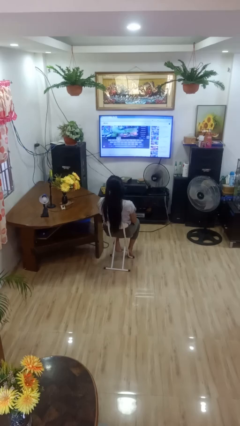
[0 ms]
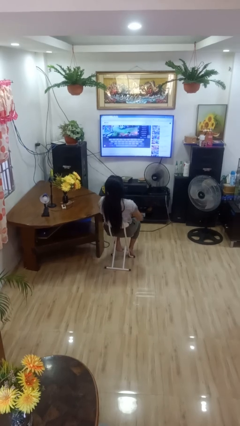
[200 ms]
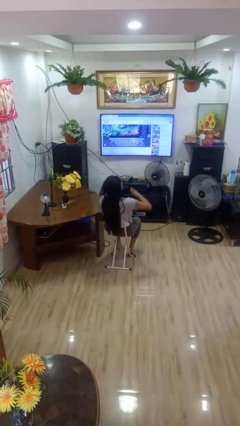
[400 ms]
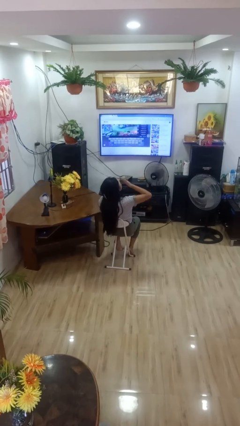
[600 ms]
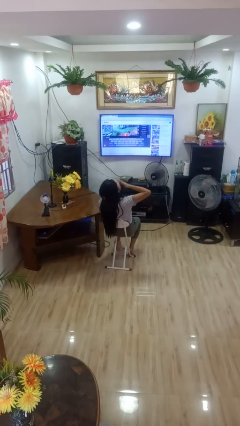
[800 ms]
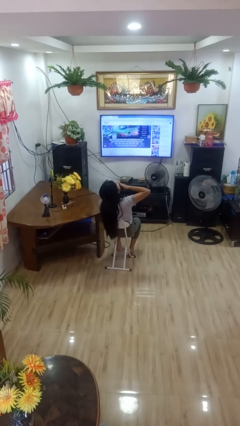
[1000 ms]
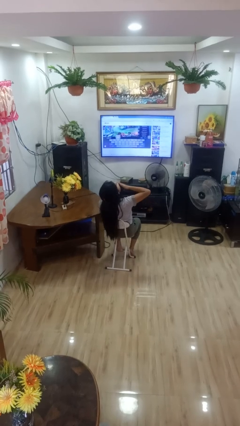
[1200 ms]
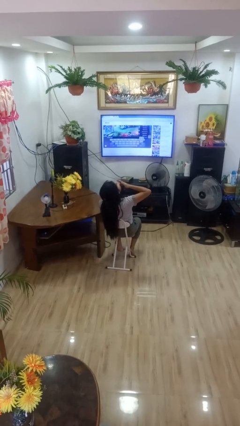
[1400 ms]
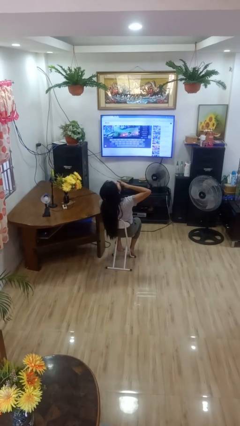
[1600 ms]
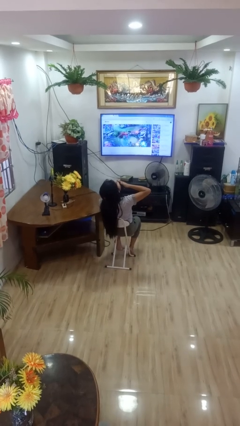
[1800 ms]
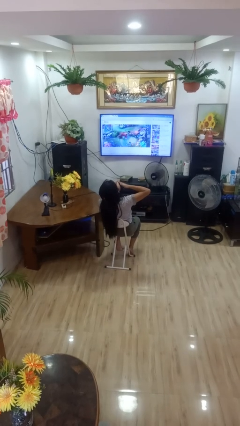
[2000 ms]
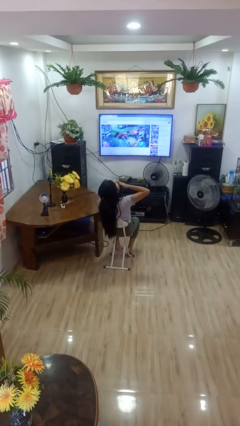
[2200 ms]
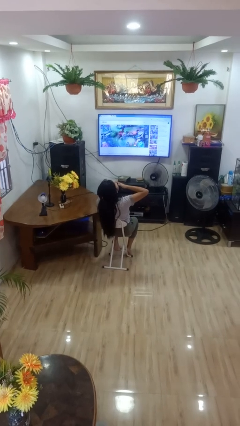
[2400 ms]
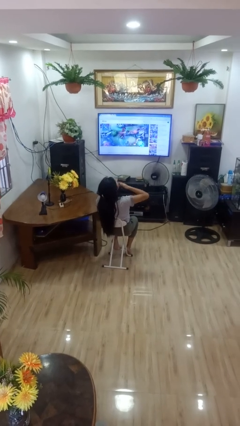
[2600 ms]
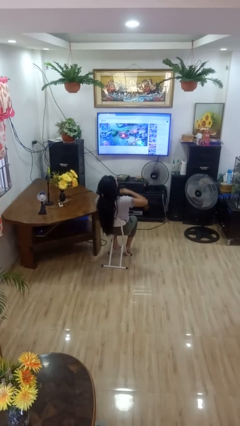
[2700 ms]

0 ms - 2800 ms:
person yawns

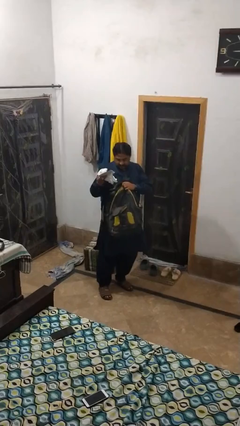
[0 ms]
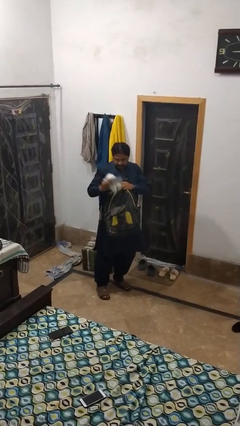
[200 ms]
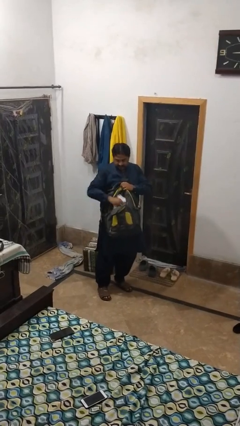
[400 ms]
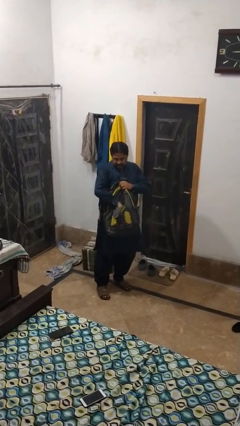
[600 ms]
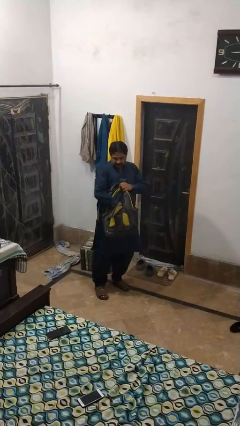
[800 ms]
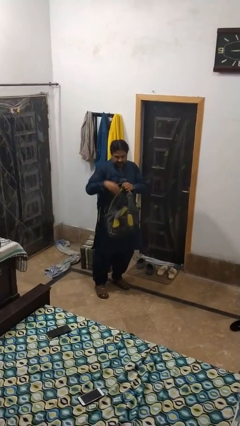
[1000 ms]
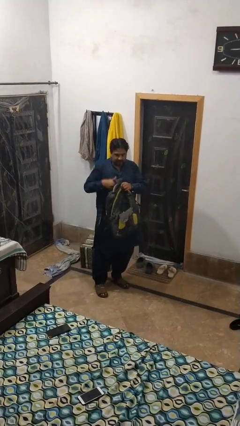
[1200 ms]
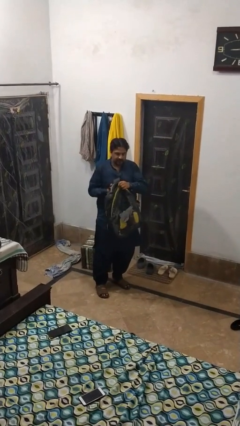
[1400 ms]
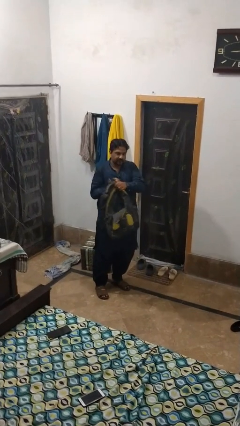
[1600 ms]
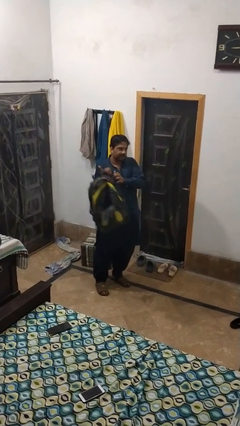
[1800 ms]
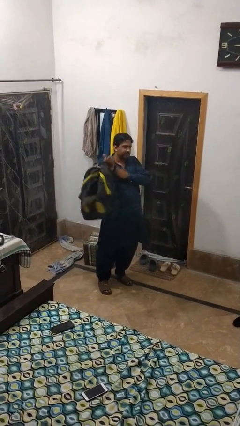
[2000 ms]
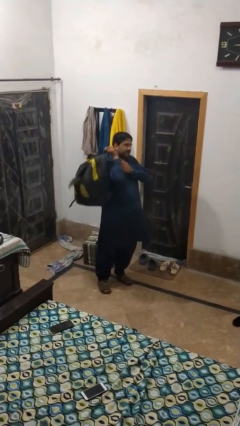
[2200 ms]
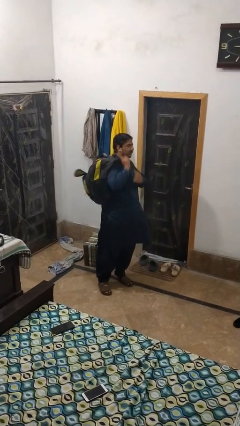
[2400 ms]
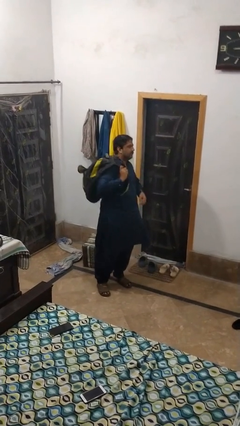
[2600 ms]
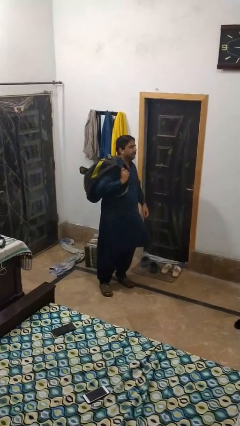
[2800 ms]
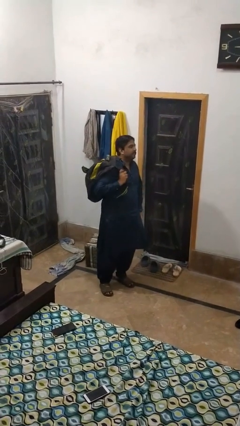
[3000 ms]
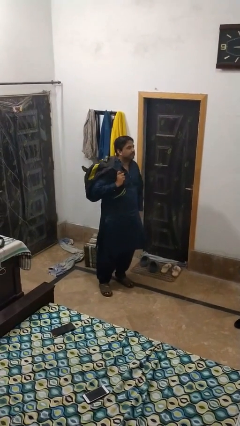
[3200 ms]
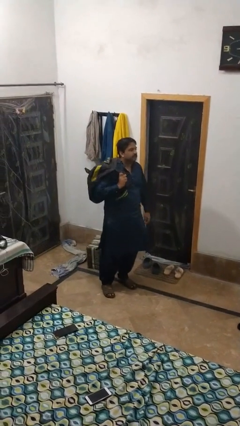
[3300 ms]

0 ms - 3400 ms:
person puts object into backpack

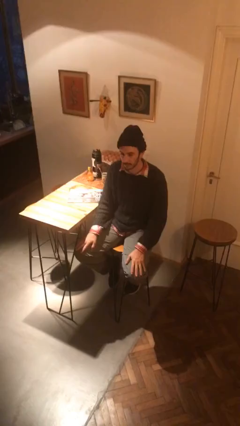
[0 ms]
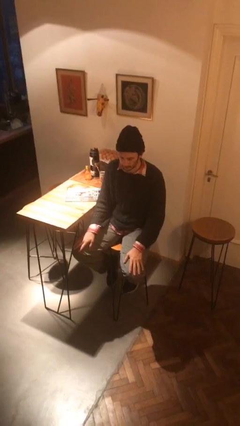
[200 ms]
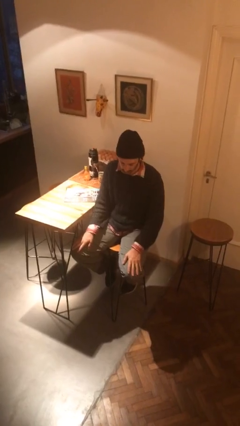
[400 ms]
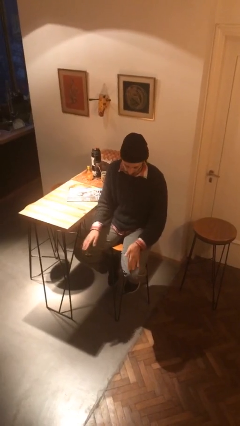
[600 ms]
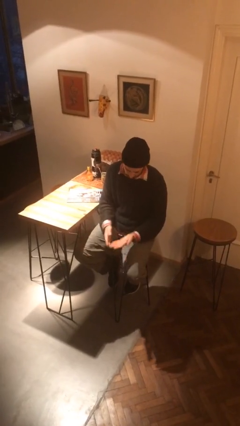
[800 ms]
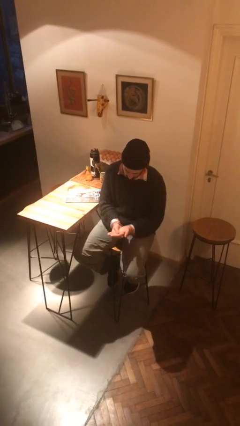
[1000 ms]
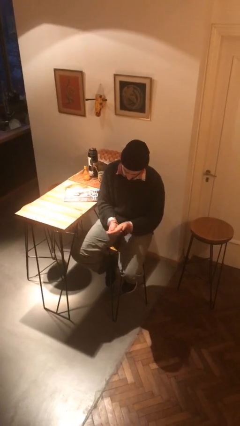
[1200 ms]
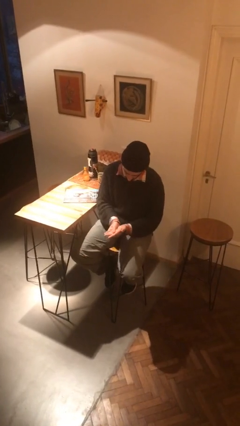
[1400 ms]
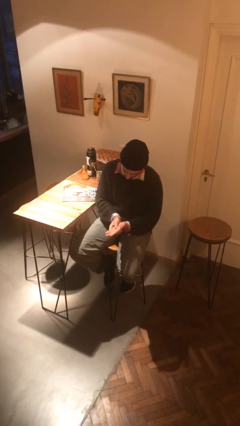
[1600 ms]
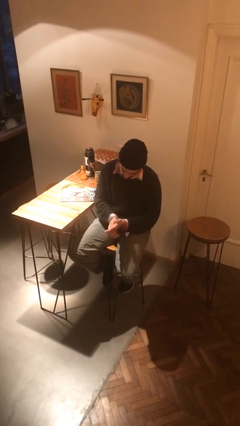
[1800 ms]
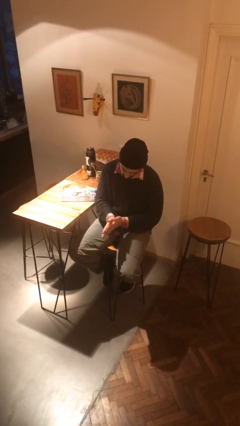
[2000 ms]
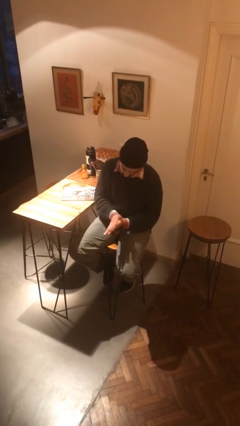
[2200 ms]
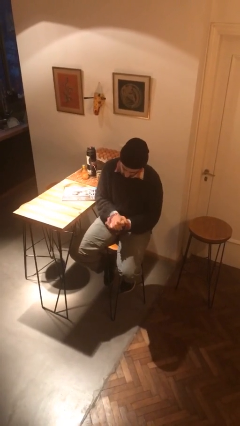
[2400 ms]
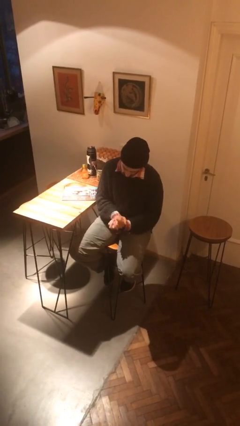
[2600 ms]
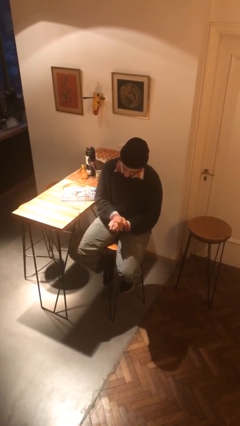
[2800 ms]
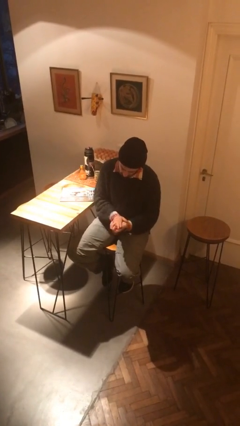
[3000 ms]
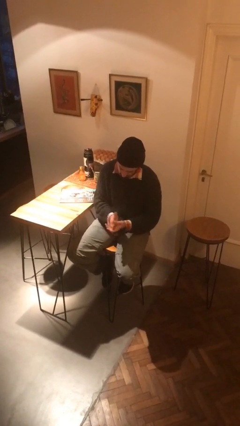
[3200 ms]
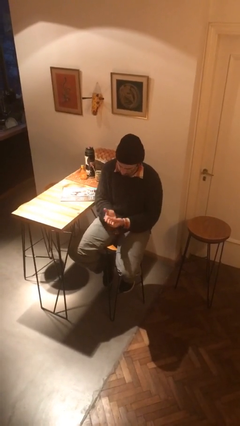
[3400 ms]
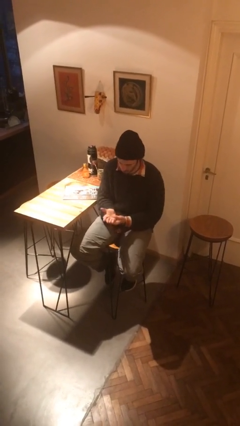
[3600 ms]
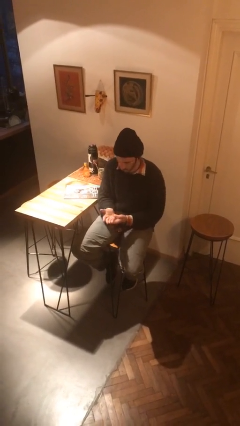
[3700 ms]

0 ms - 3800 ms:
person looks at hands in lap

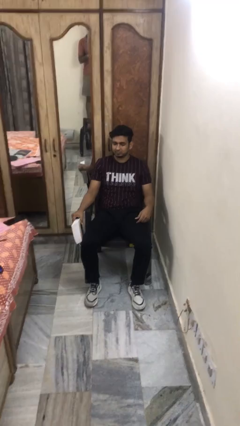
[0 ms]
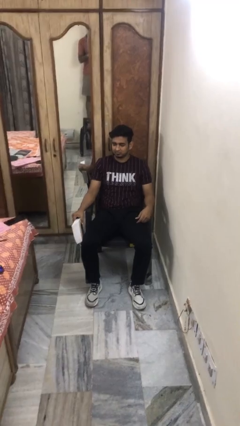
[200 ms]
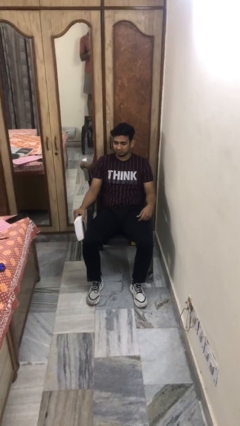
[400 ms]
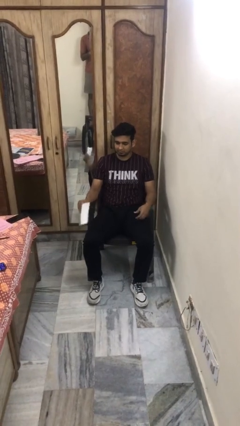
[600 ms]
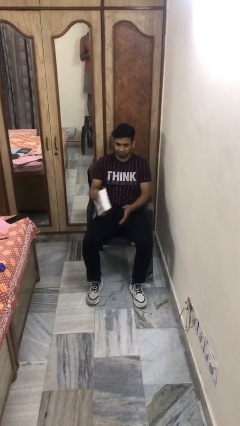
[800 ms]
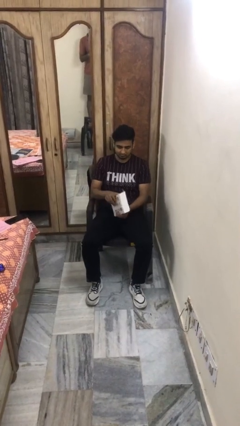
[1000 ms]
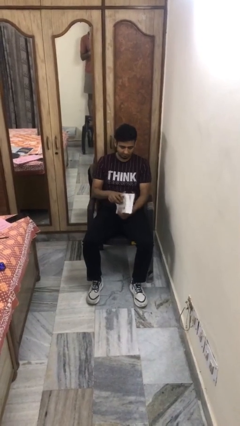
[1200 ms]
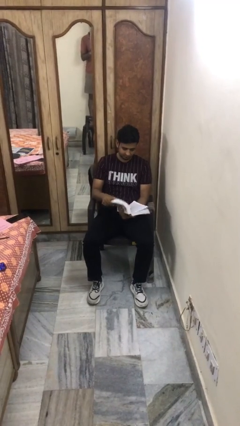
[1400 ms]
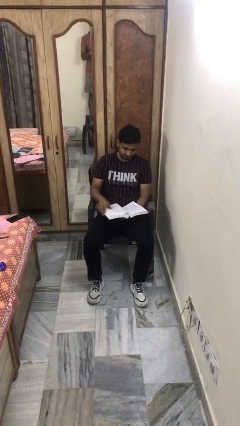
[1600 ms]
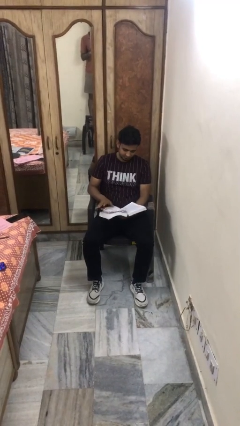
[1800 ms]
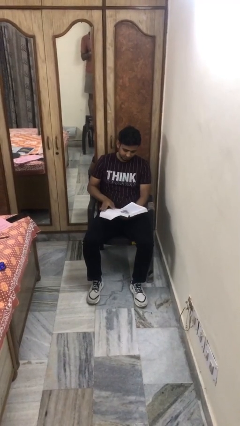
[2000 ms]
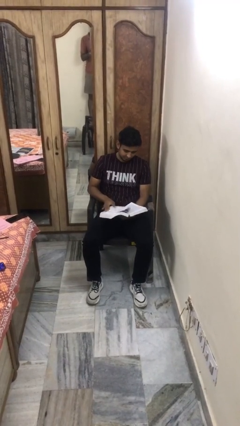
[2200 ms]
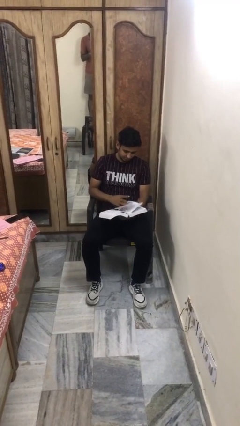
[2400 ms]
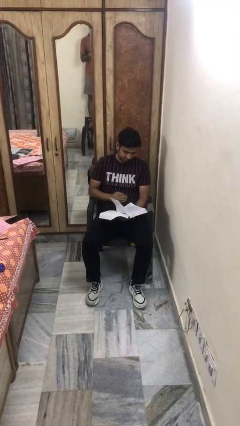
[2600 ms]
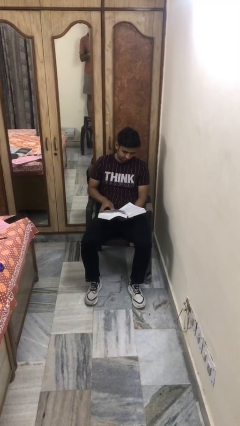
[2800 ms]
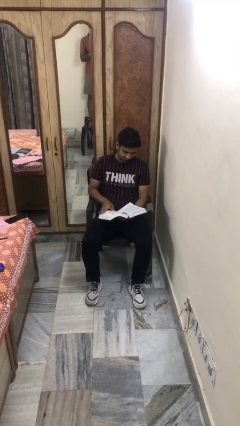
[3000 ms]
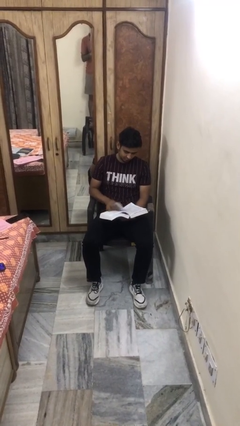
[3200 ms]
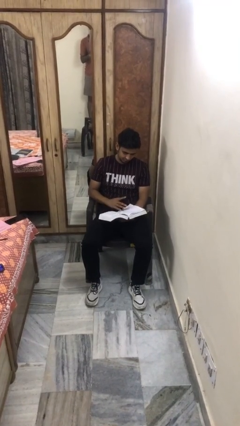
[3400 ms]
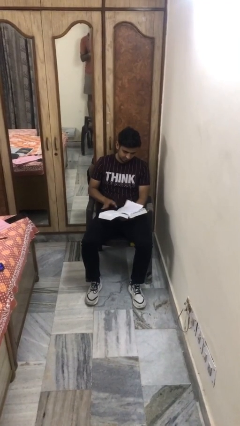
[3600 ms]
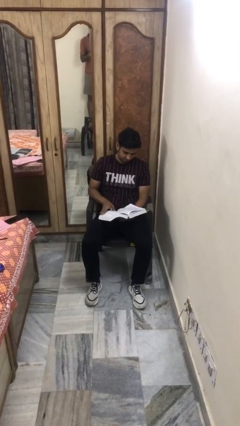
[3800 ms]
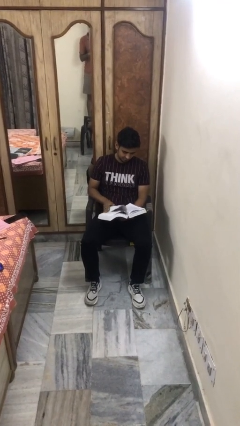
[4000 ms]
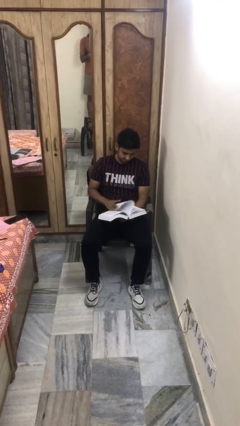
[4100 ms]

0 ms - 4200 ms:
person reads book

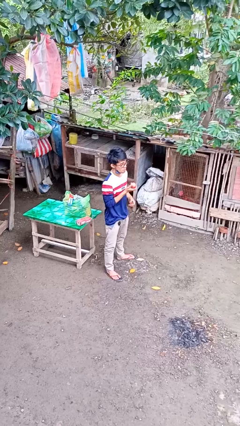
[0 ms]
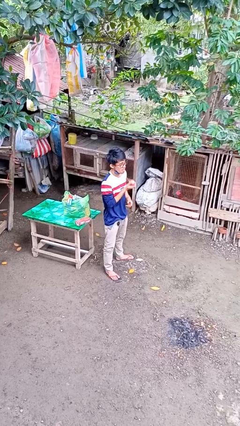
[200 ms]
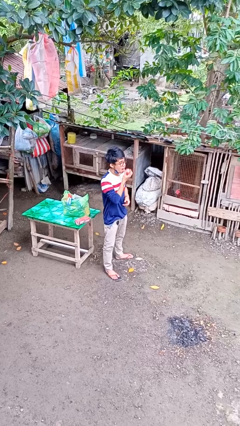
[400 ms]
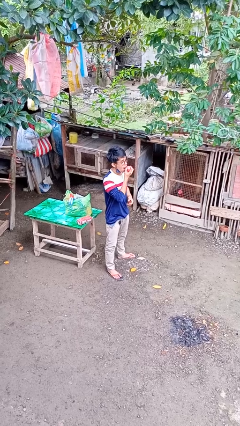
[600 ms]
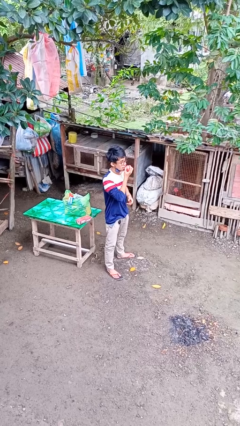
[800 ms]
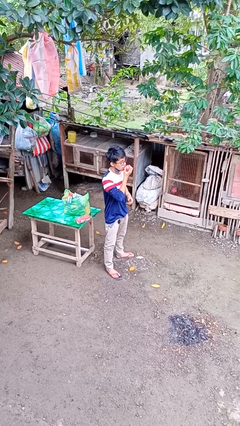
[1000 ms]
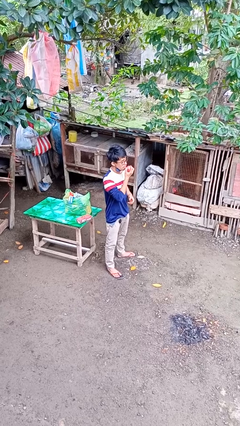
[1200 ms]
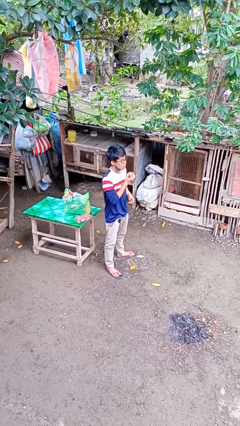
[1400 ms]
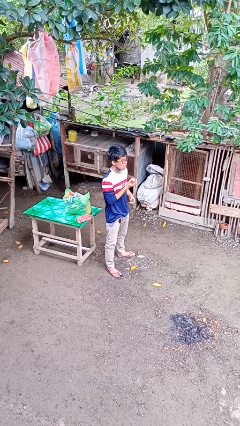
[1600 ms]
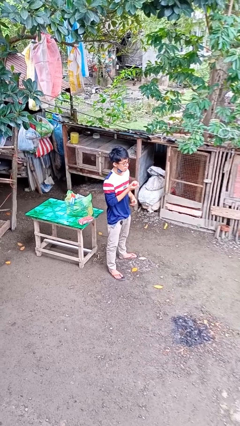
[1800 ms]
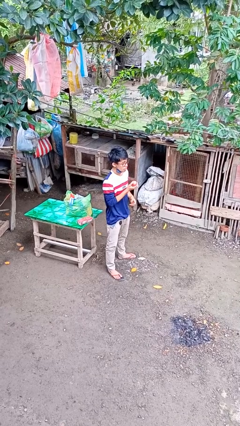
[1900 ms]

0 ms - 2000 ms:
person eats apple

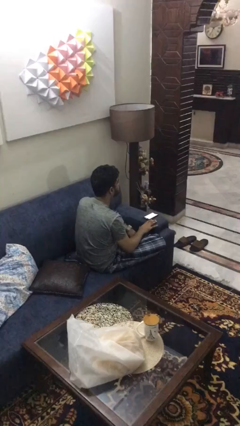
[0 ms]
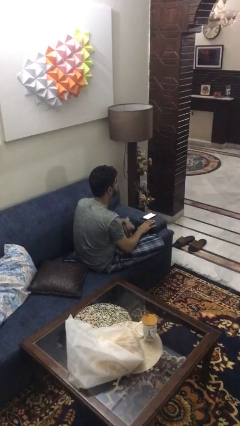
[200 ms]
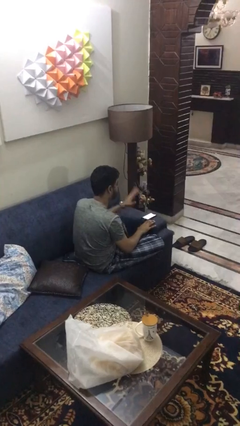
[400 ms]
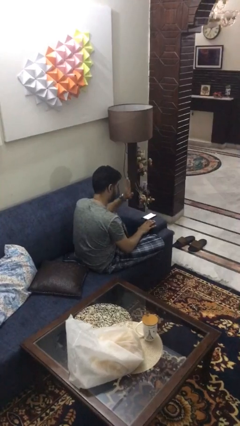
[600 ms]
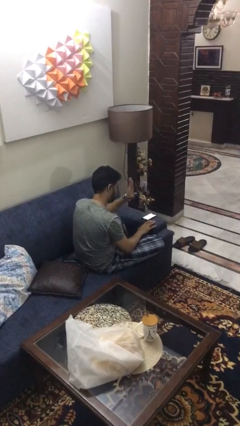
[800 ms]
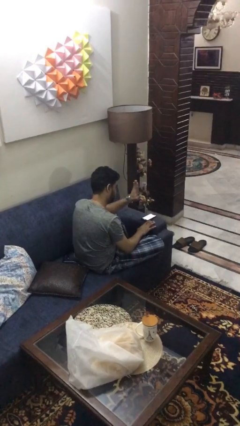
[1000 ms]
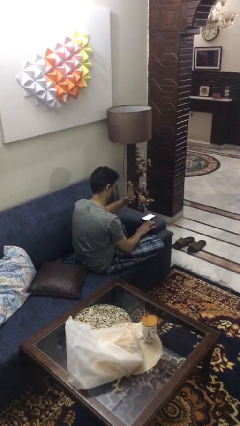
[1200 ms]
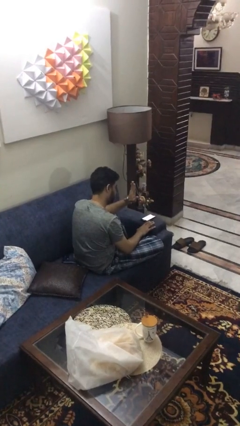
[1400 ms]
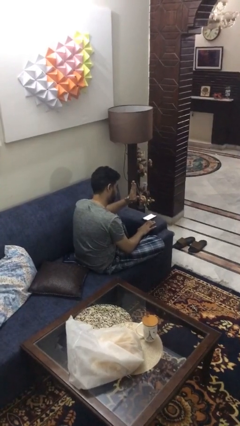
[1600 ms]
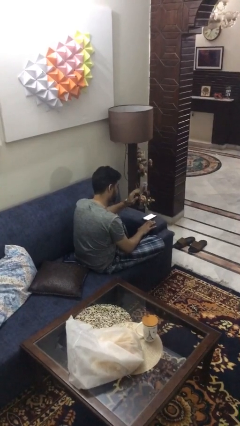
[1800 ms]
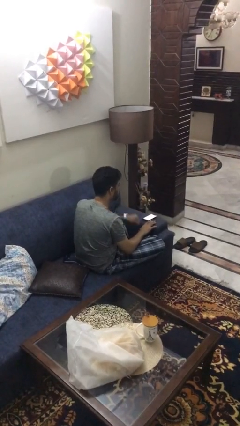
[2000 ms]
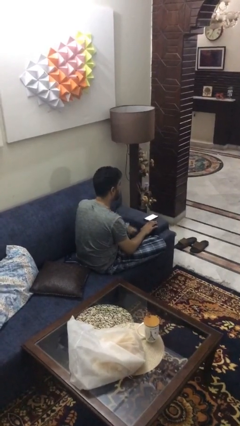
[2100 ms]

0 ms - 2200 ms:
person gestures stop
